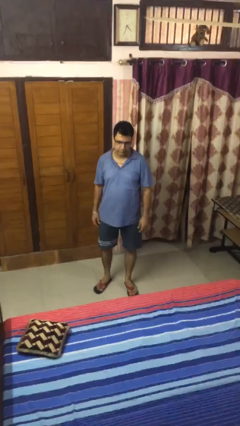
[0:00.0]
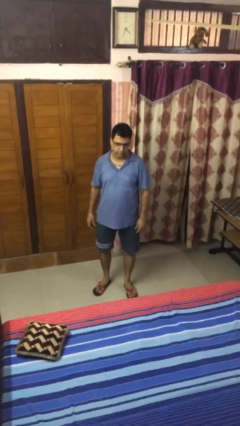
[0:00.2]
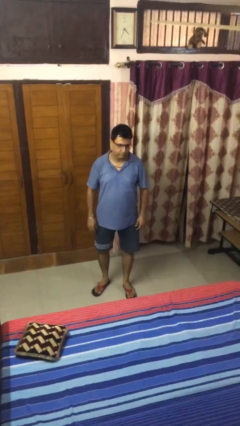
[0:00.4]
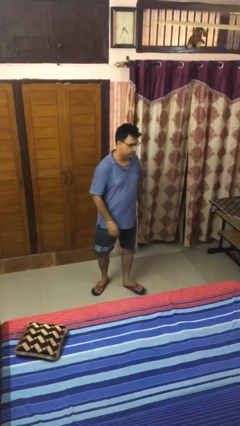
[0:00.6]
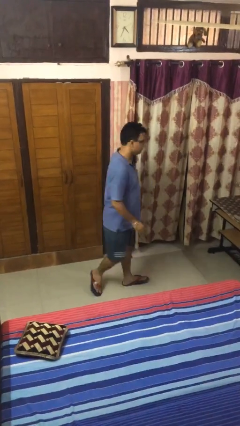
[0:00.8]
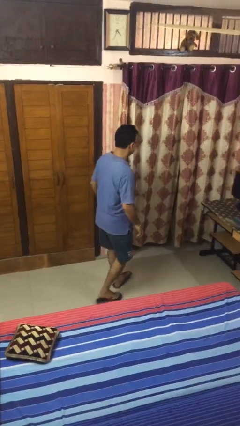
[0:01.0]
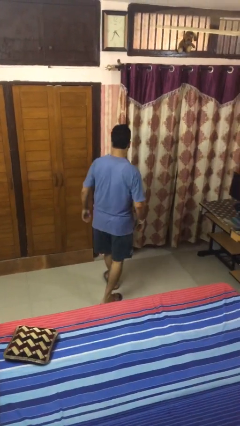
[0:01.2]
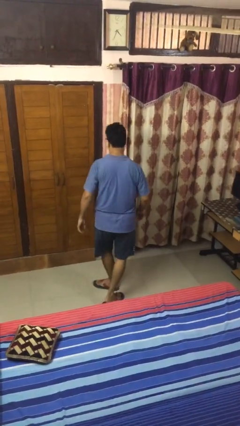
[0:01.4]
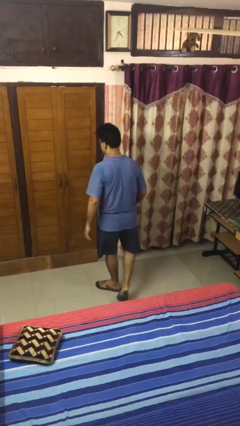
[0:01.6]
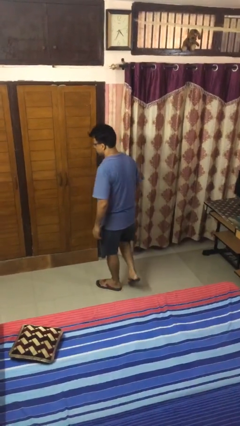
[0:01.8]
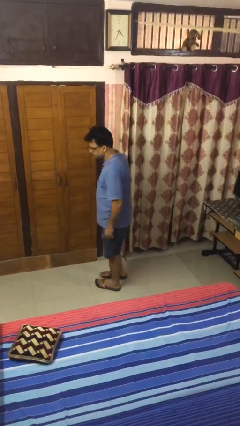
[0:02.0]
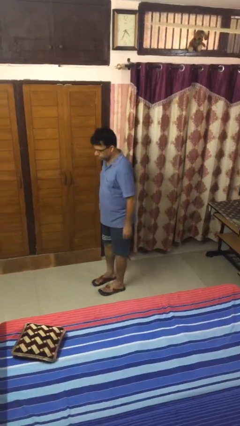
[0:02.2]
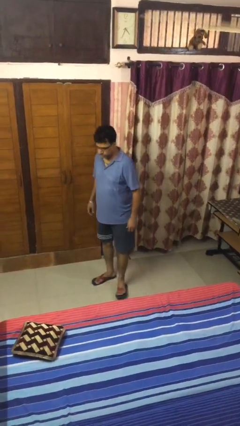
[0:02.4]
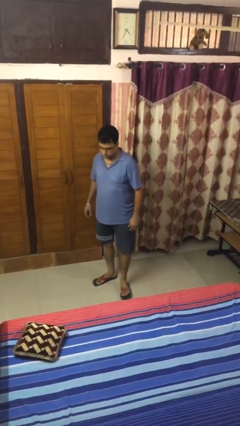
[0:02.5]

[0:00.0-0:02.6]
person twirls

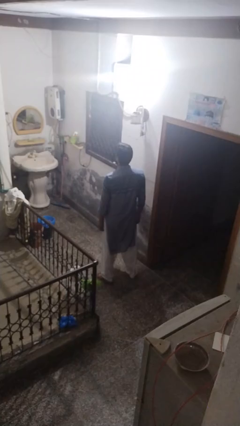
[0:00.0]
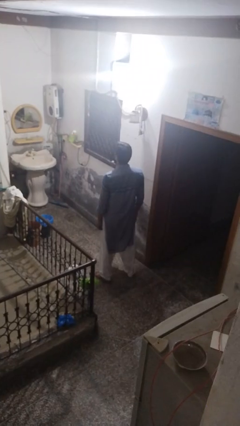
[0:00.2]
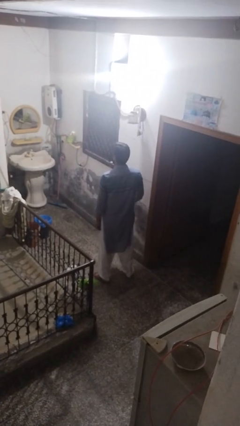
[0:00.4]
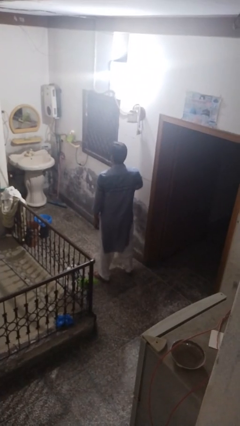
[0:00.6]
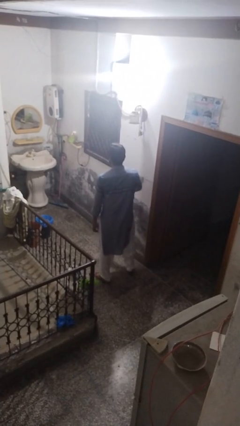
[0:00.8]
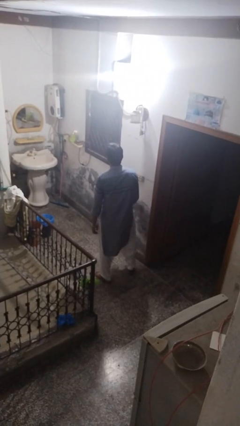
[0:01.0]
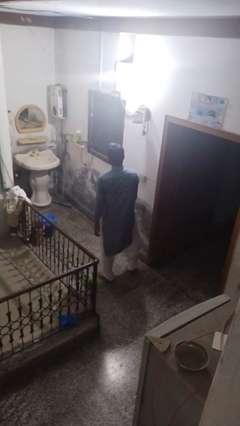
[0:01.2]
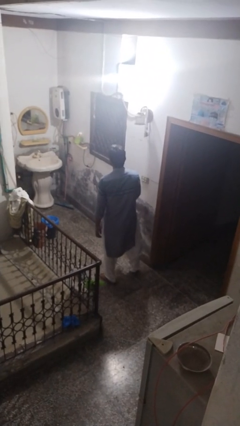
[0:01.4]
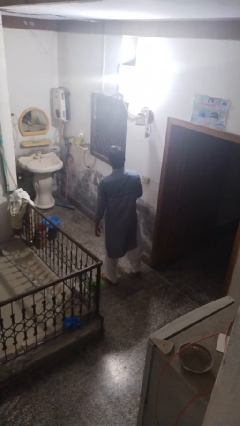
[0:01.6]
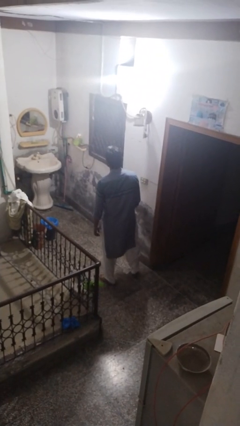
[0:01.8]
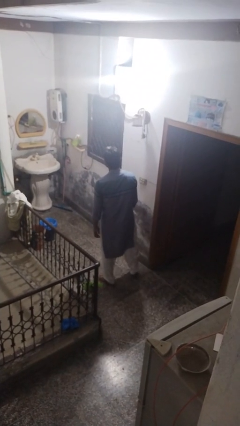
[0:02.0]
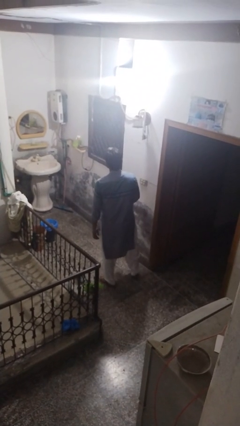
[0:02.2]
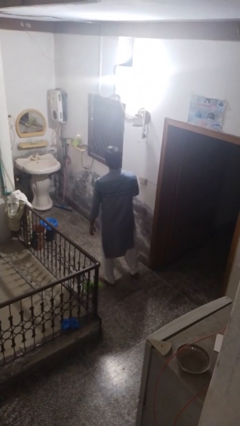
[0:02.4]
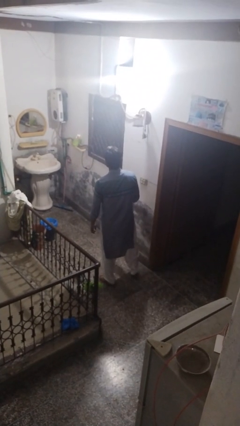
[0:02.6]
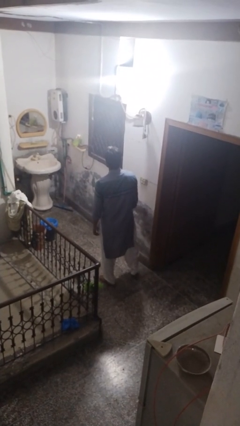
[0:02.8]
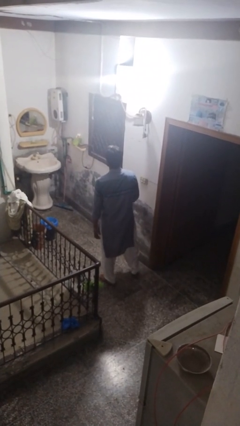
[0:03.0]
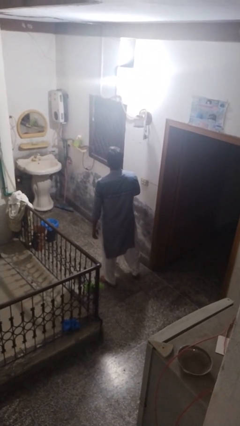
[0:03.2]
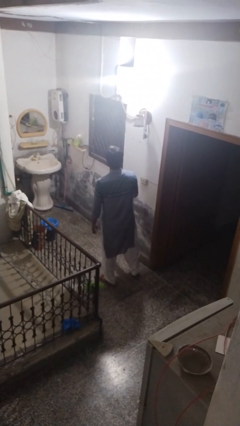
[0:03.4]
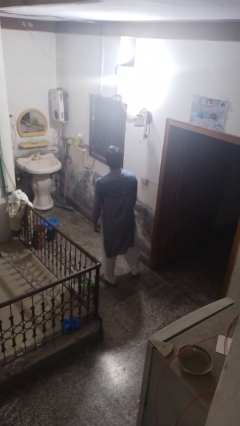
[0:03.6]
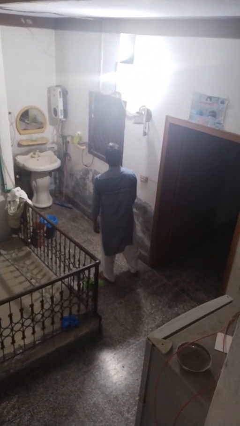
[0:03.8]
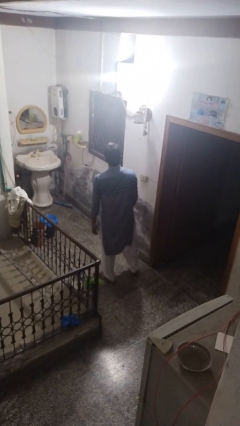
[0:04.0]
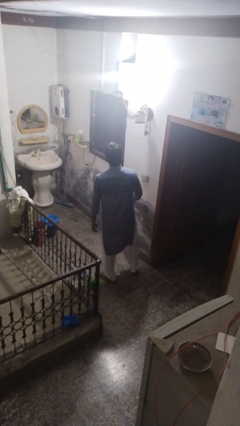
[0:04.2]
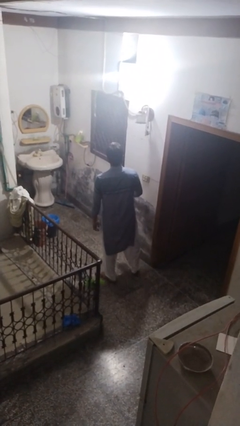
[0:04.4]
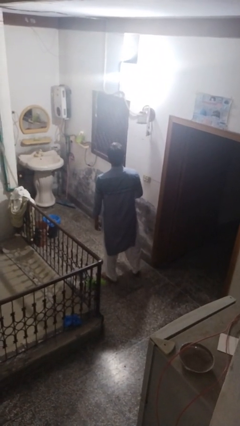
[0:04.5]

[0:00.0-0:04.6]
person slaps hands on thighs

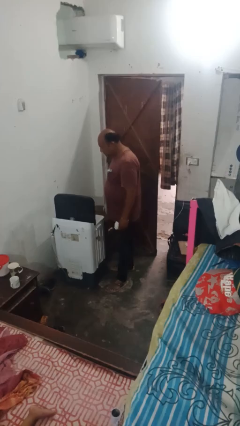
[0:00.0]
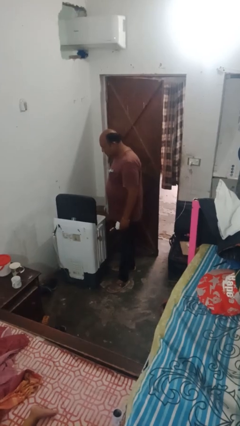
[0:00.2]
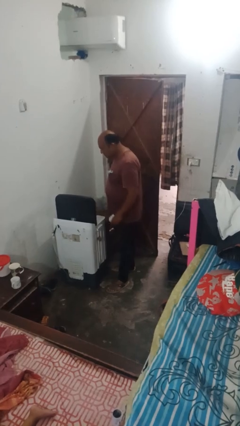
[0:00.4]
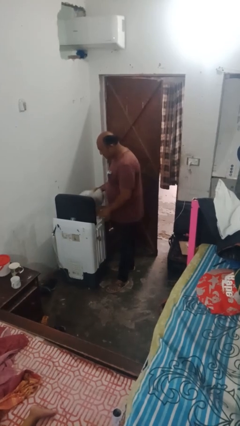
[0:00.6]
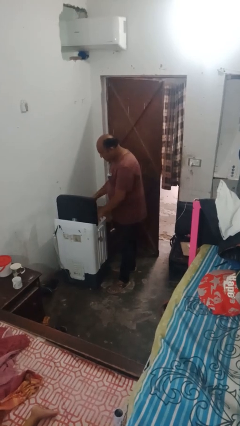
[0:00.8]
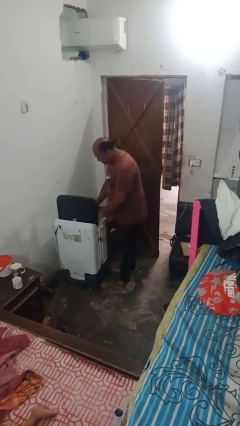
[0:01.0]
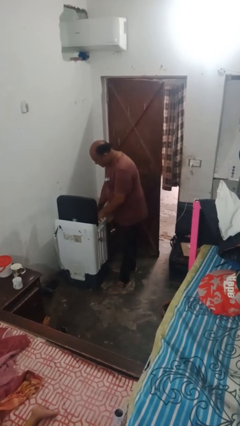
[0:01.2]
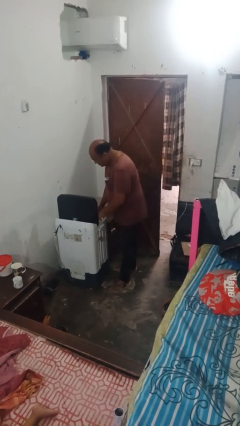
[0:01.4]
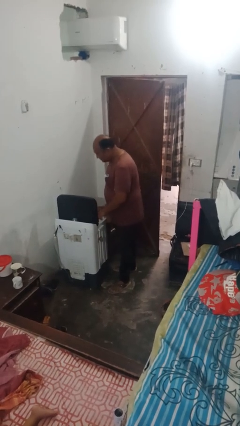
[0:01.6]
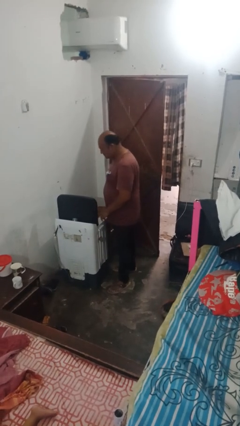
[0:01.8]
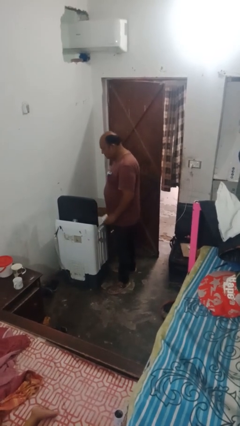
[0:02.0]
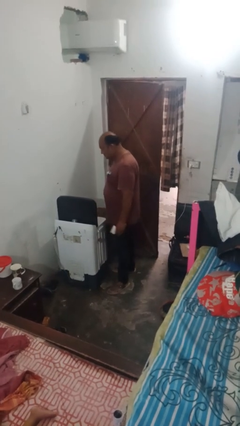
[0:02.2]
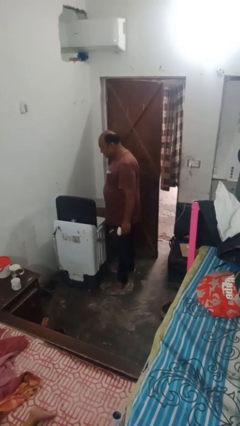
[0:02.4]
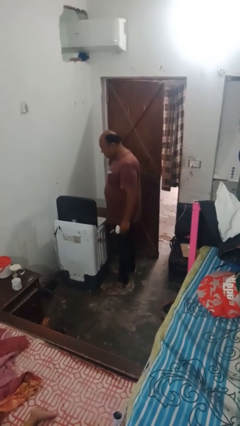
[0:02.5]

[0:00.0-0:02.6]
person loads dryer

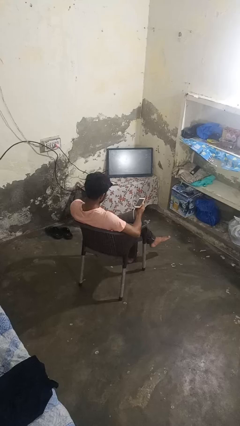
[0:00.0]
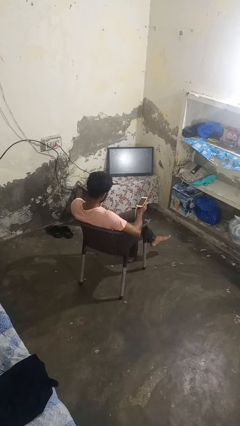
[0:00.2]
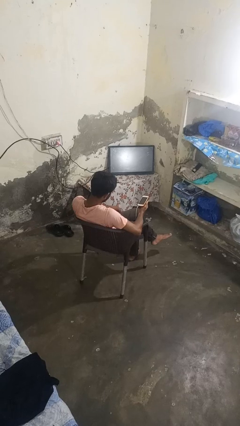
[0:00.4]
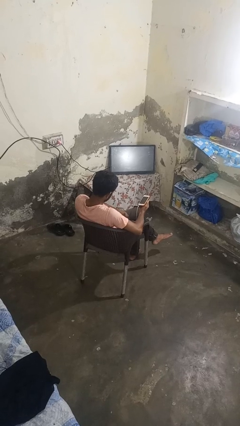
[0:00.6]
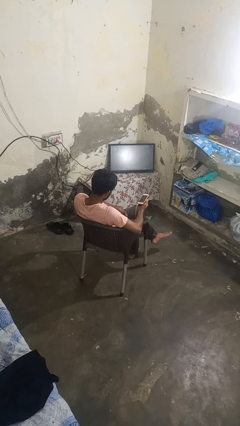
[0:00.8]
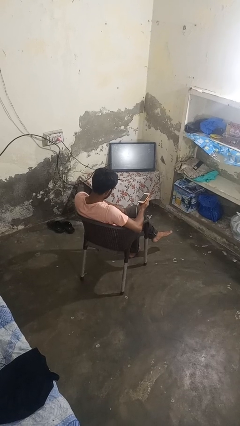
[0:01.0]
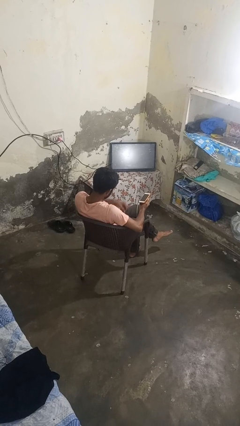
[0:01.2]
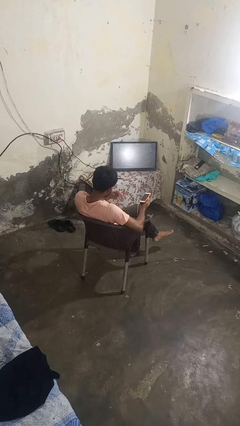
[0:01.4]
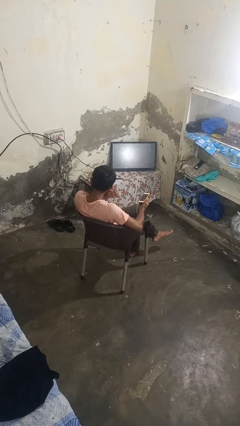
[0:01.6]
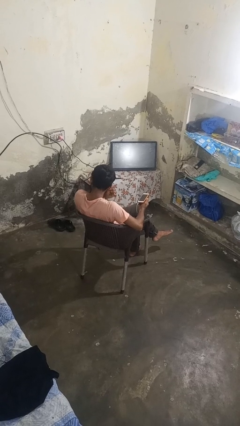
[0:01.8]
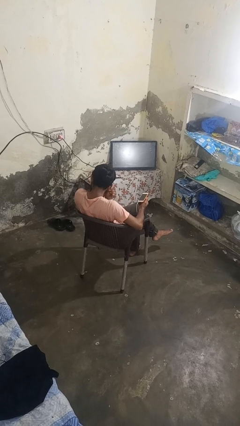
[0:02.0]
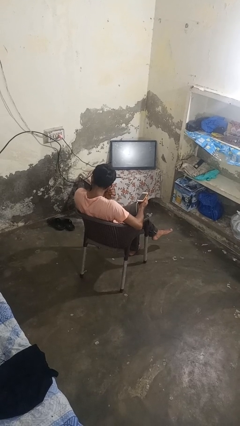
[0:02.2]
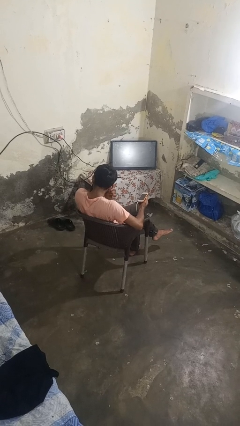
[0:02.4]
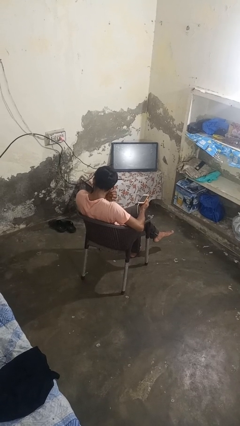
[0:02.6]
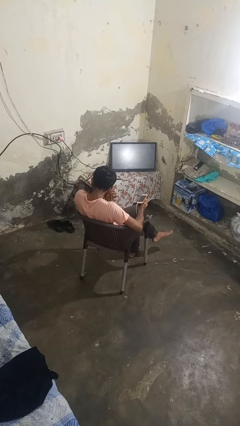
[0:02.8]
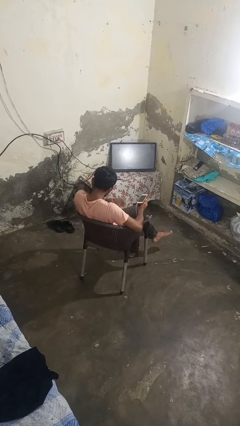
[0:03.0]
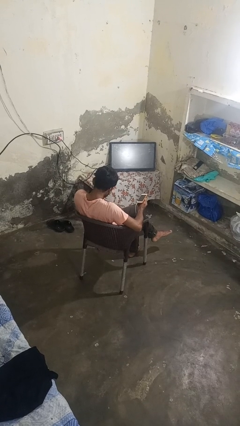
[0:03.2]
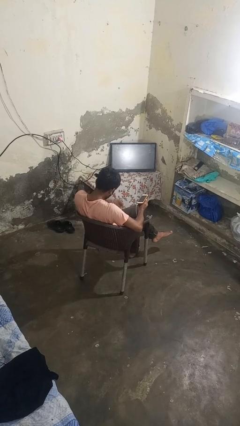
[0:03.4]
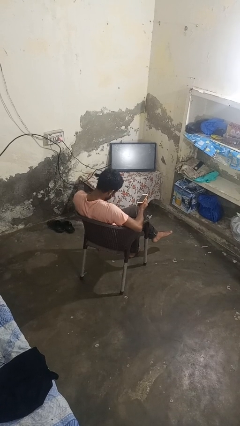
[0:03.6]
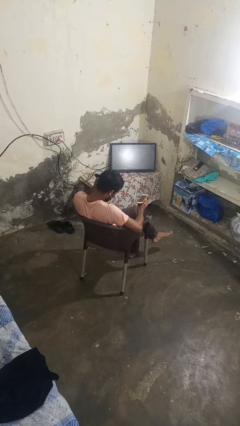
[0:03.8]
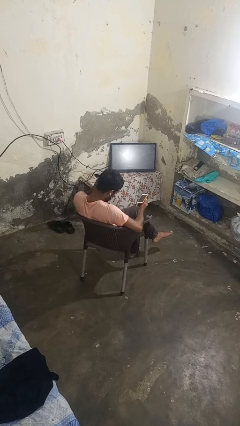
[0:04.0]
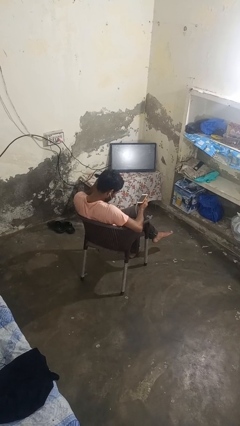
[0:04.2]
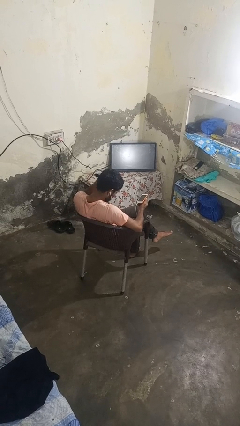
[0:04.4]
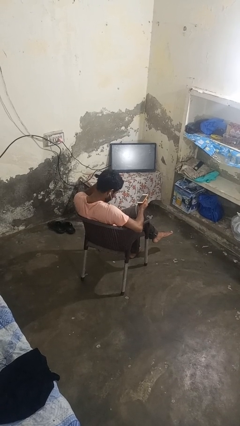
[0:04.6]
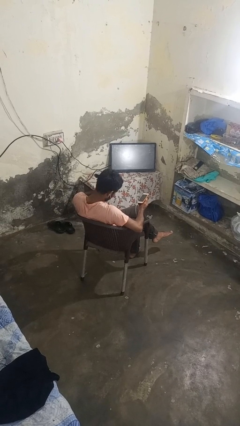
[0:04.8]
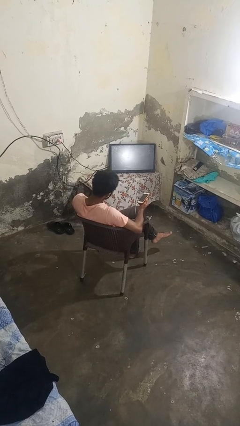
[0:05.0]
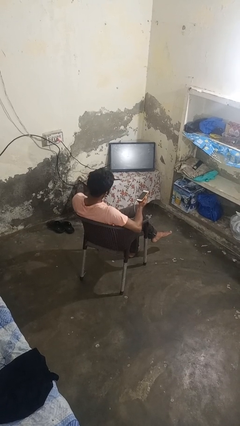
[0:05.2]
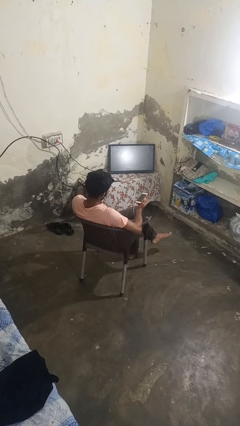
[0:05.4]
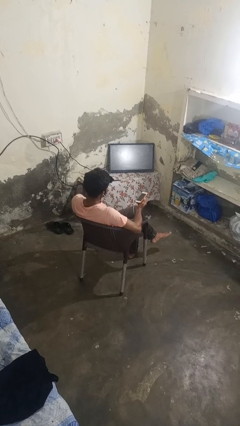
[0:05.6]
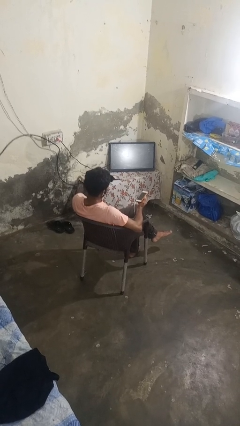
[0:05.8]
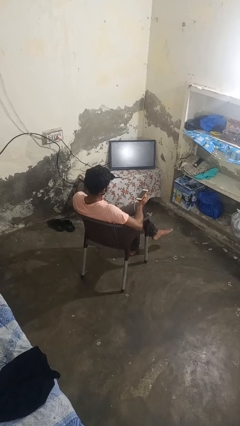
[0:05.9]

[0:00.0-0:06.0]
person puts on headphones

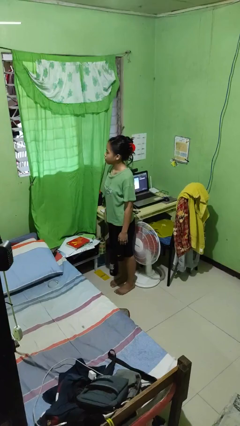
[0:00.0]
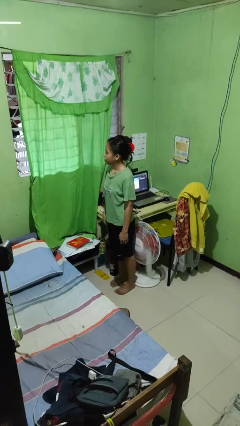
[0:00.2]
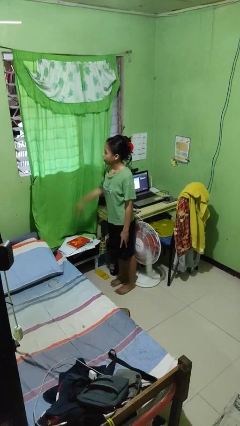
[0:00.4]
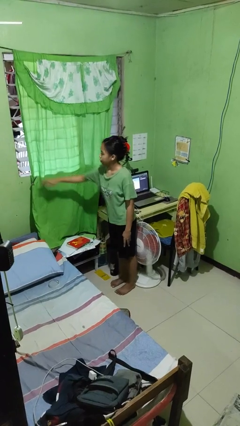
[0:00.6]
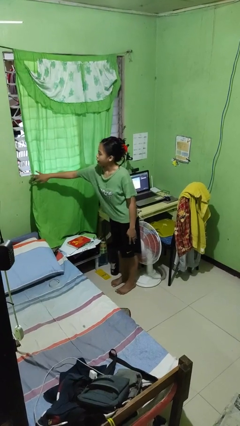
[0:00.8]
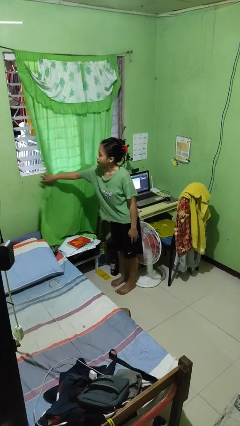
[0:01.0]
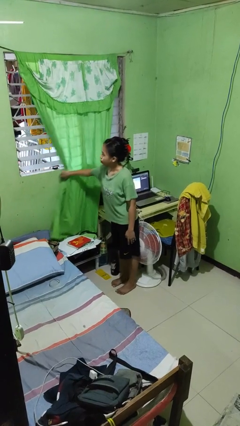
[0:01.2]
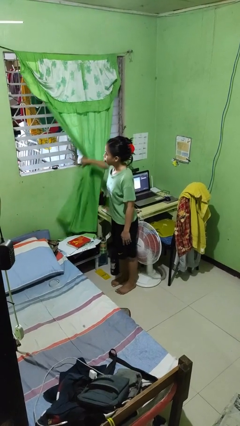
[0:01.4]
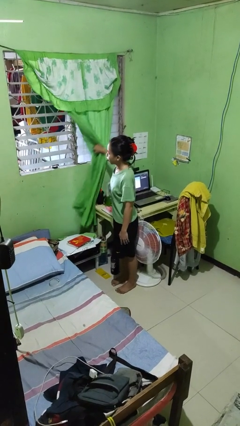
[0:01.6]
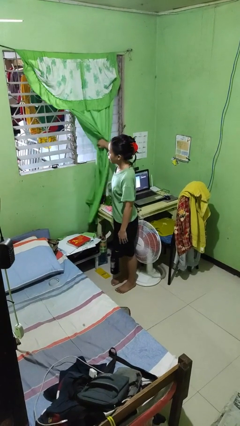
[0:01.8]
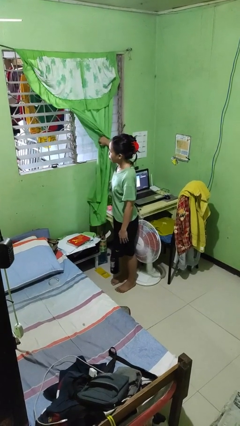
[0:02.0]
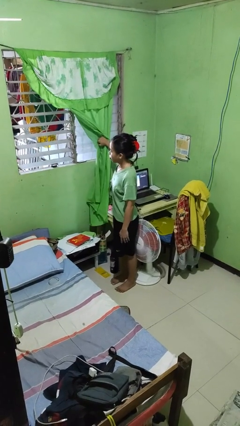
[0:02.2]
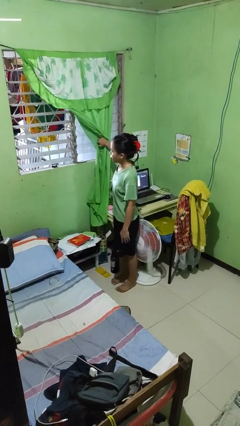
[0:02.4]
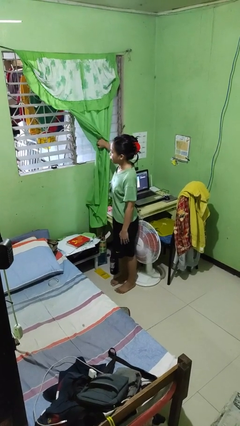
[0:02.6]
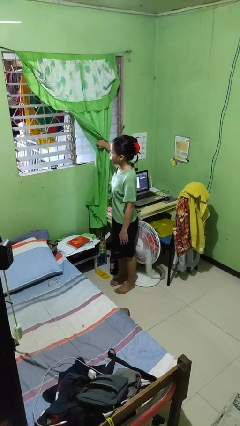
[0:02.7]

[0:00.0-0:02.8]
person opens curtains
